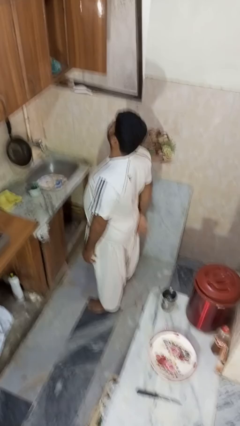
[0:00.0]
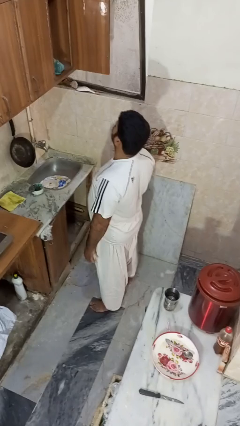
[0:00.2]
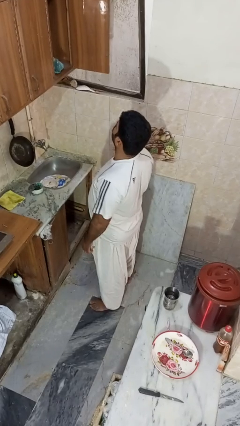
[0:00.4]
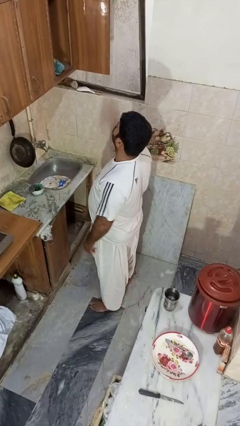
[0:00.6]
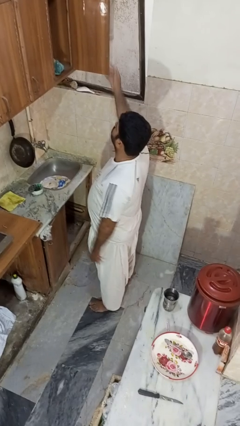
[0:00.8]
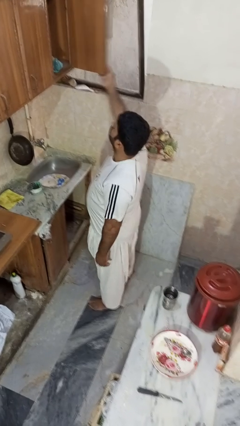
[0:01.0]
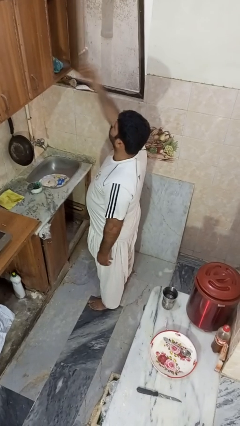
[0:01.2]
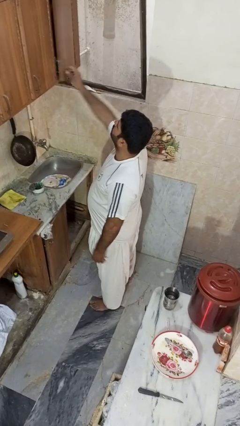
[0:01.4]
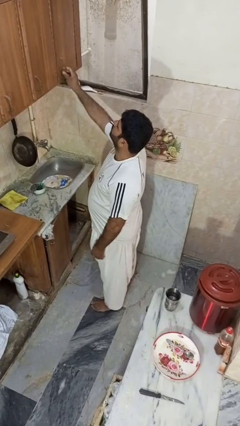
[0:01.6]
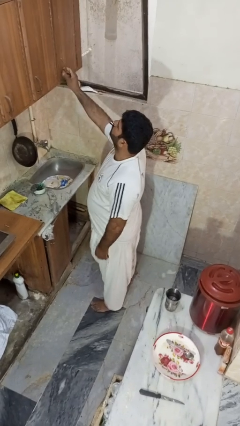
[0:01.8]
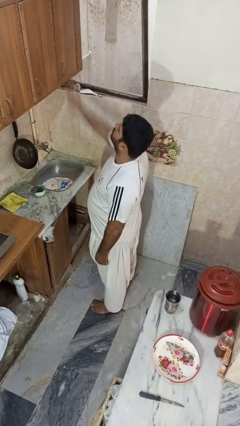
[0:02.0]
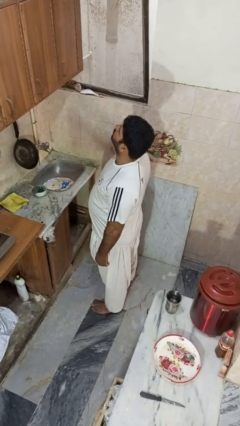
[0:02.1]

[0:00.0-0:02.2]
person closes cabinet

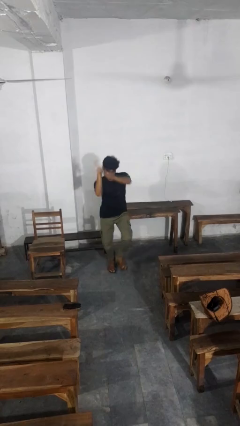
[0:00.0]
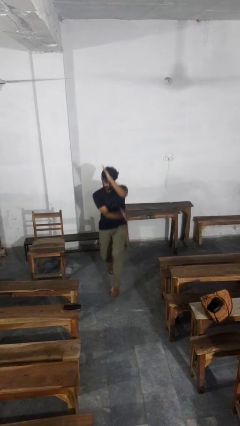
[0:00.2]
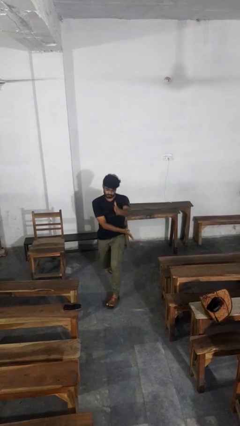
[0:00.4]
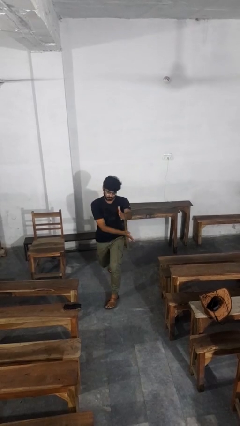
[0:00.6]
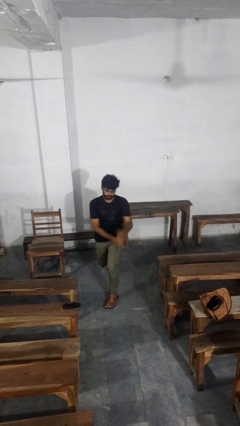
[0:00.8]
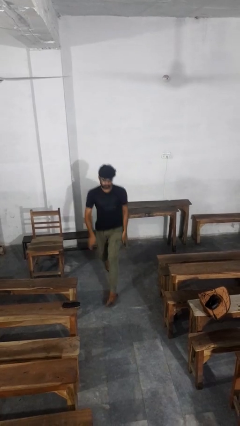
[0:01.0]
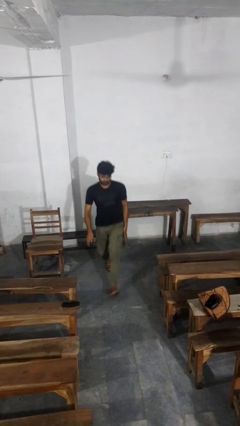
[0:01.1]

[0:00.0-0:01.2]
person karate chop

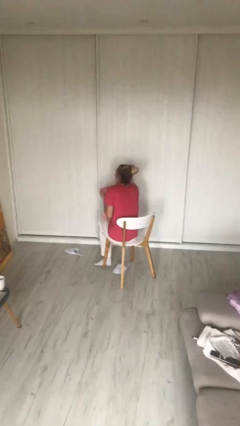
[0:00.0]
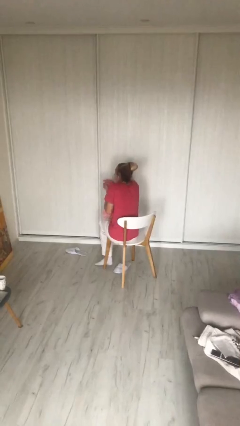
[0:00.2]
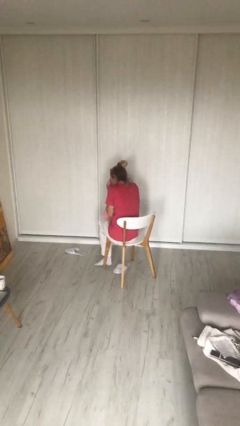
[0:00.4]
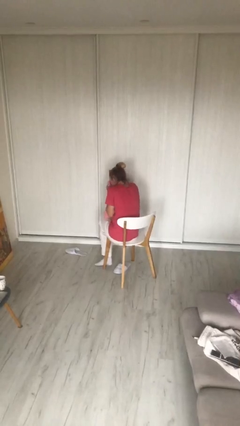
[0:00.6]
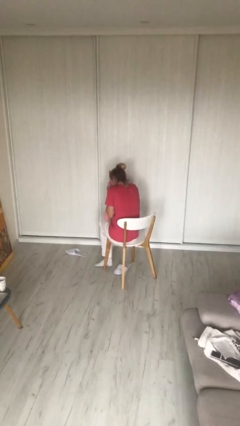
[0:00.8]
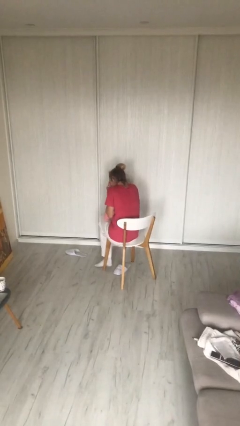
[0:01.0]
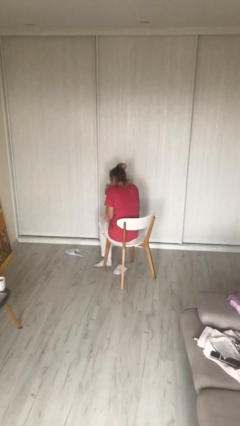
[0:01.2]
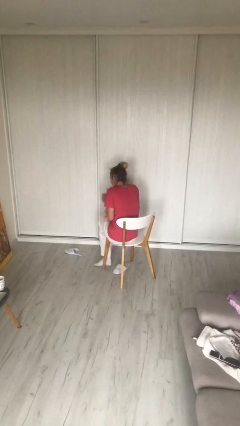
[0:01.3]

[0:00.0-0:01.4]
person blows nose

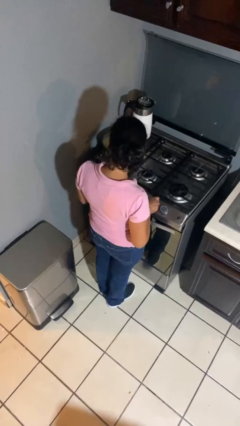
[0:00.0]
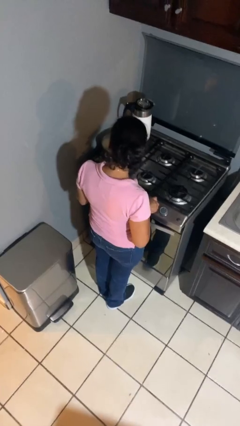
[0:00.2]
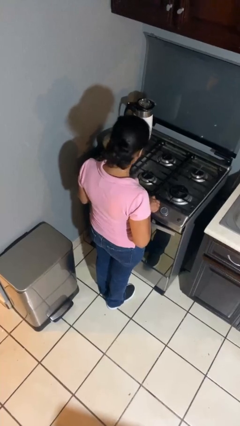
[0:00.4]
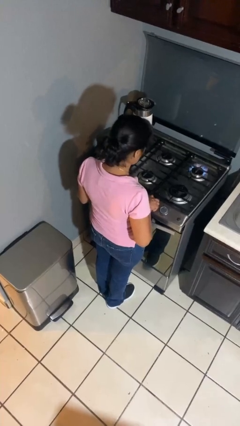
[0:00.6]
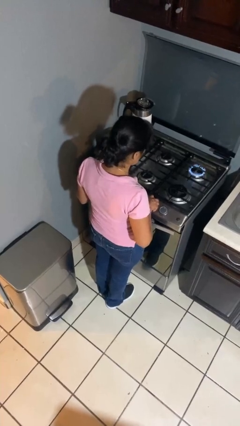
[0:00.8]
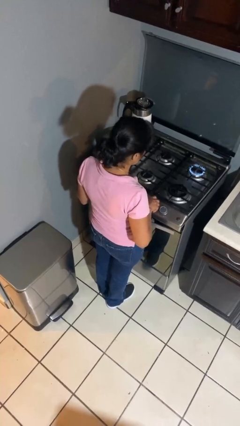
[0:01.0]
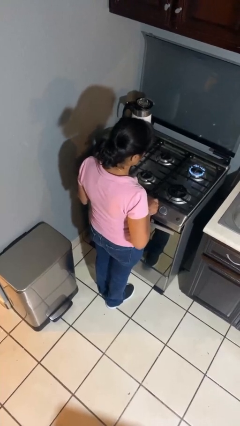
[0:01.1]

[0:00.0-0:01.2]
person turns on stovetop

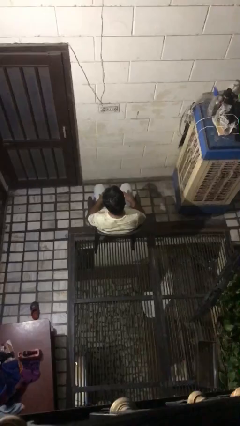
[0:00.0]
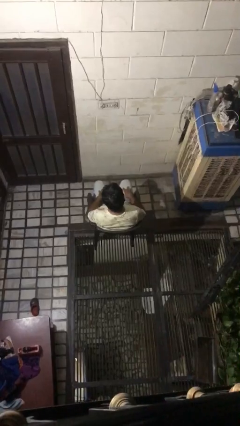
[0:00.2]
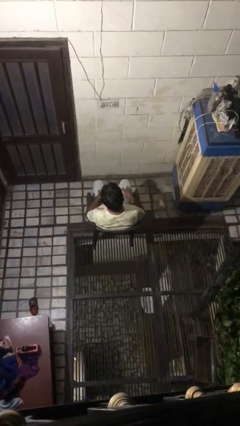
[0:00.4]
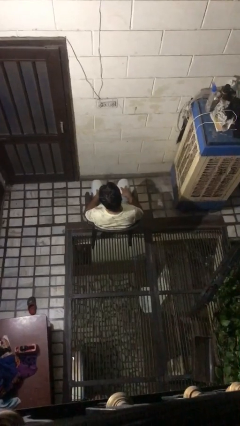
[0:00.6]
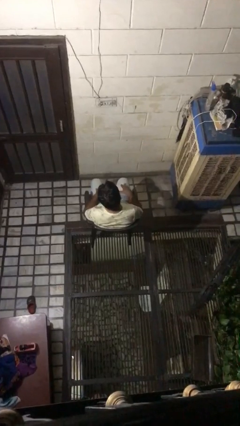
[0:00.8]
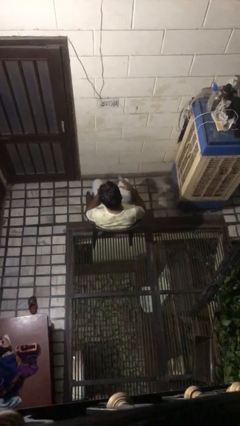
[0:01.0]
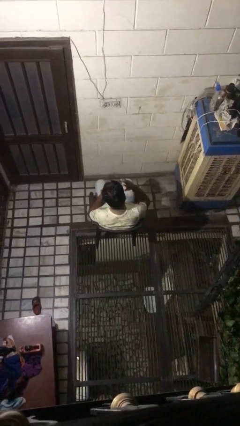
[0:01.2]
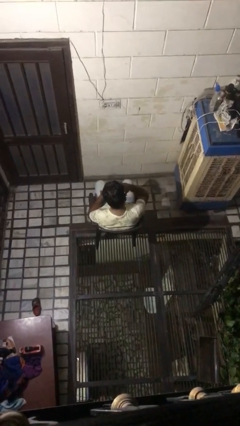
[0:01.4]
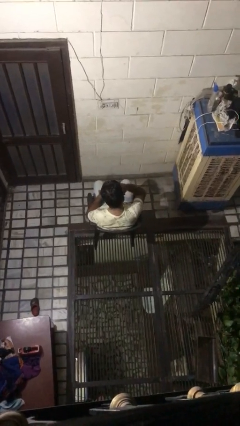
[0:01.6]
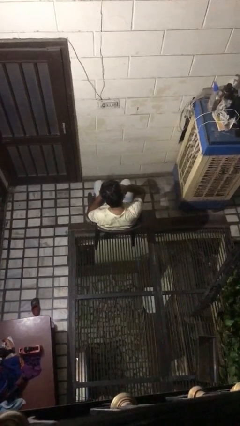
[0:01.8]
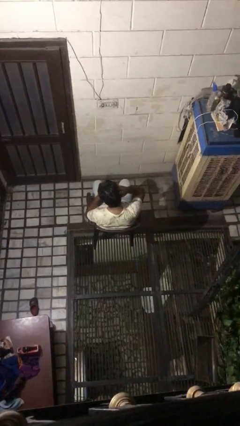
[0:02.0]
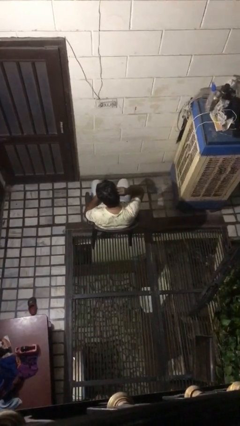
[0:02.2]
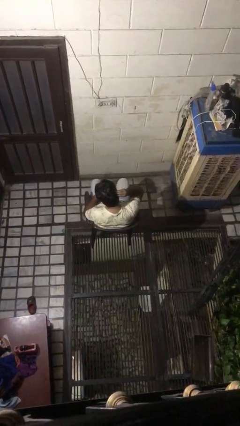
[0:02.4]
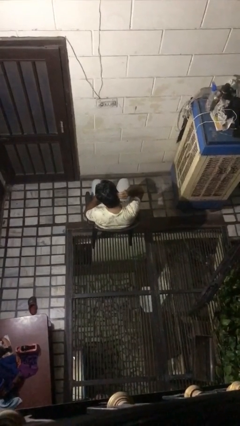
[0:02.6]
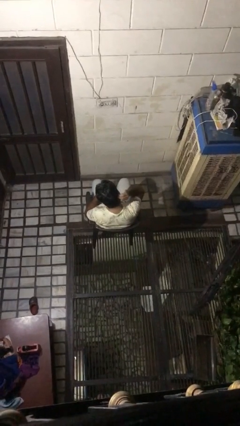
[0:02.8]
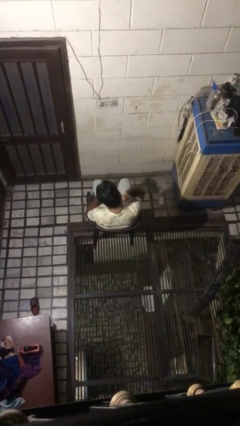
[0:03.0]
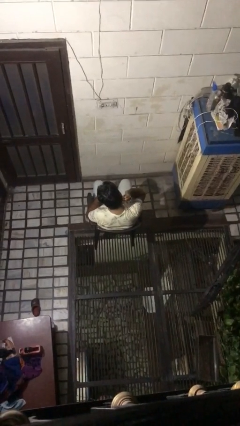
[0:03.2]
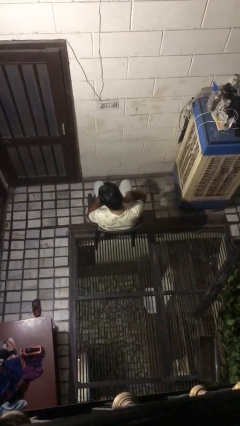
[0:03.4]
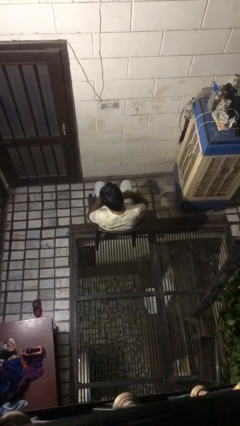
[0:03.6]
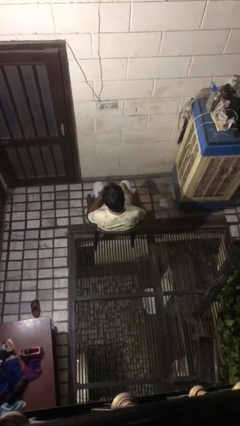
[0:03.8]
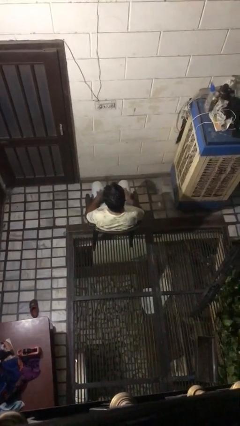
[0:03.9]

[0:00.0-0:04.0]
person strokes hair

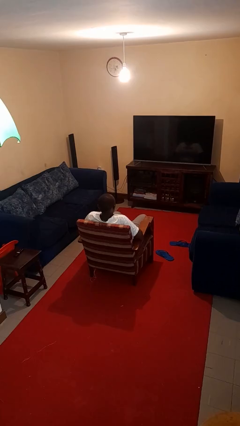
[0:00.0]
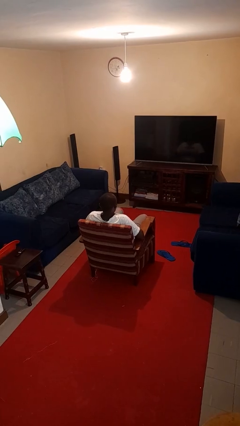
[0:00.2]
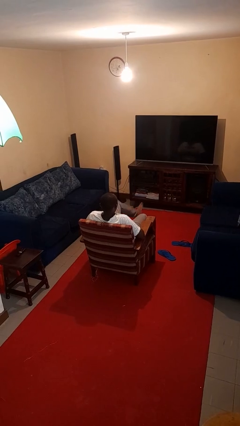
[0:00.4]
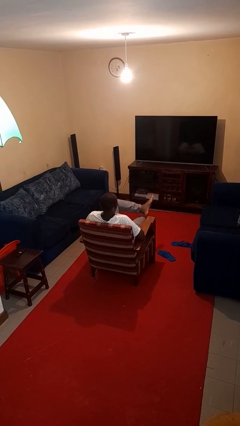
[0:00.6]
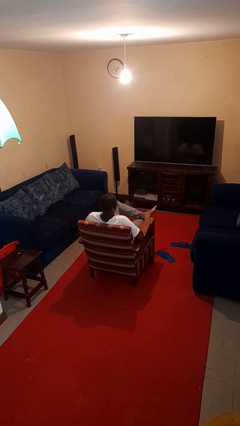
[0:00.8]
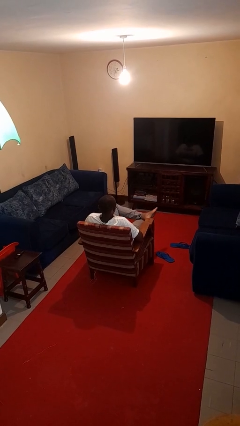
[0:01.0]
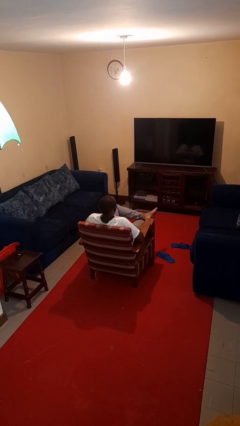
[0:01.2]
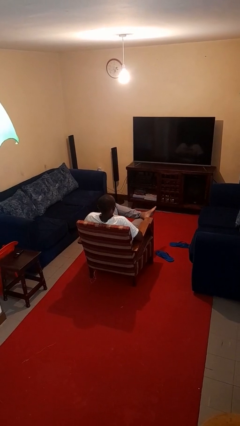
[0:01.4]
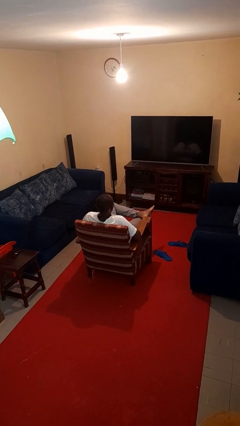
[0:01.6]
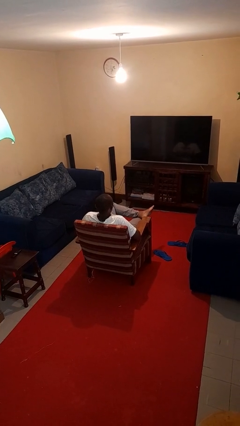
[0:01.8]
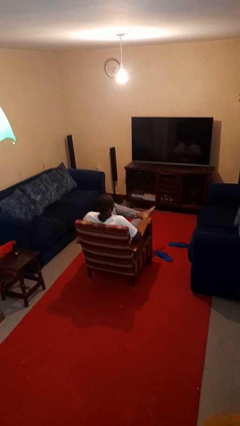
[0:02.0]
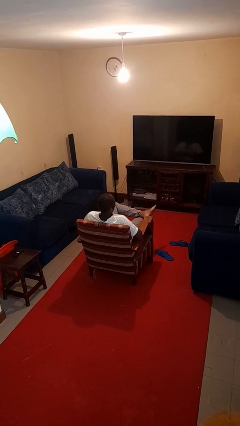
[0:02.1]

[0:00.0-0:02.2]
person crosses legs

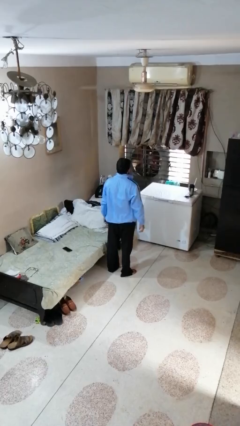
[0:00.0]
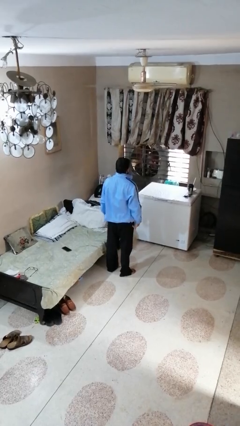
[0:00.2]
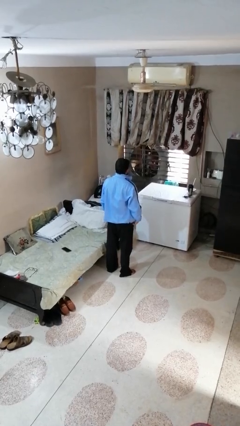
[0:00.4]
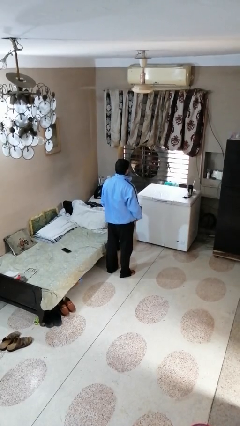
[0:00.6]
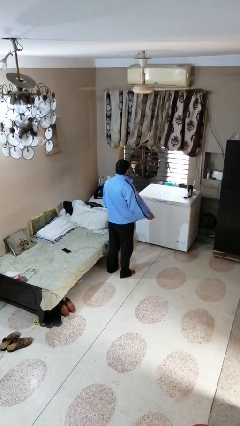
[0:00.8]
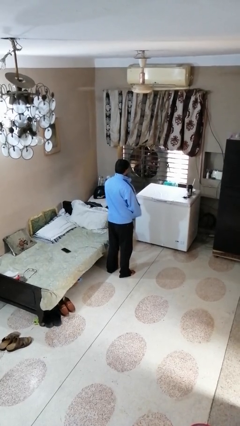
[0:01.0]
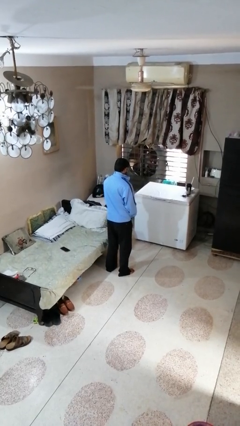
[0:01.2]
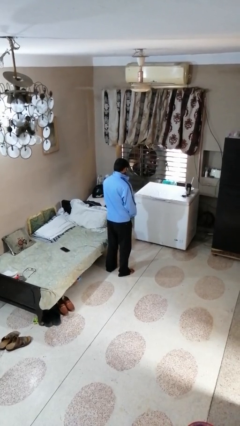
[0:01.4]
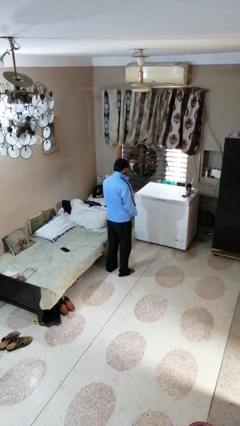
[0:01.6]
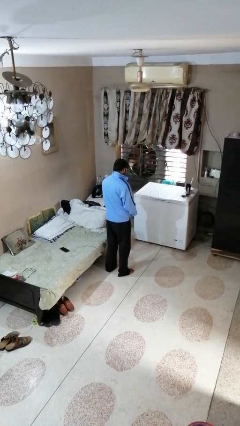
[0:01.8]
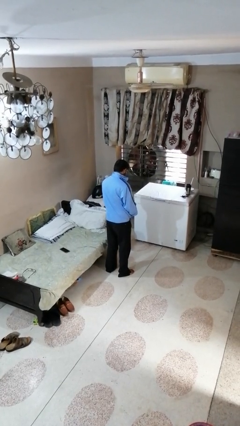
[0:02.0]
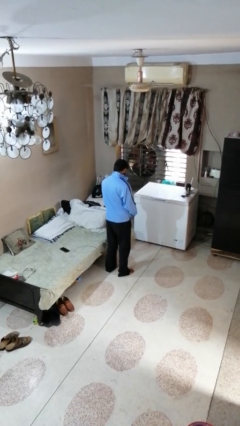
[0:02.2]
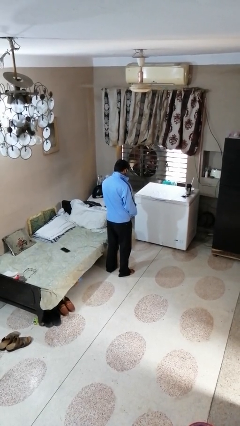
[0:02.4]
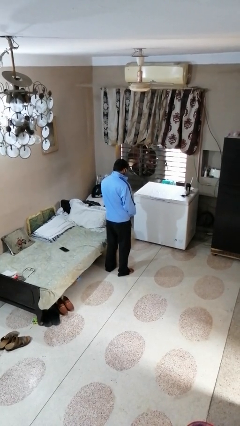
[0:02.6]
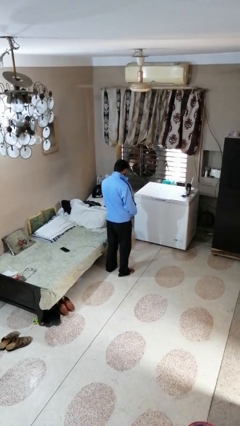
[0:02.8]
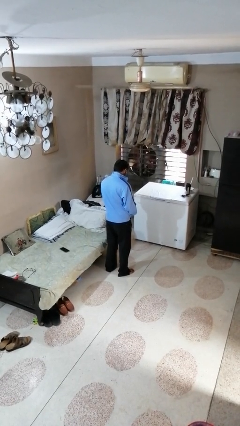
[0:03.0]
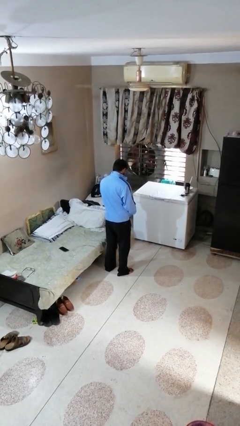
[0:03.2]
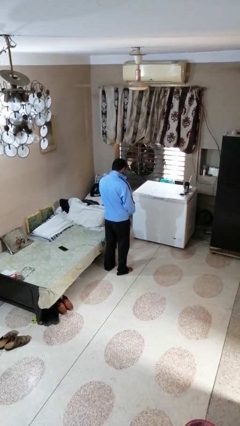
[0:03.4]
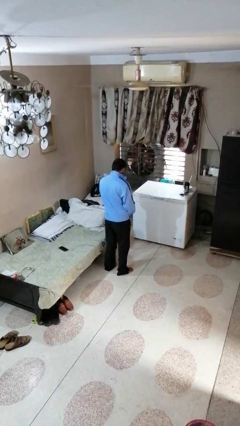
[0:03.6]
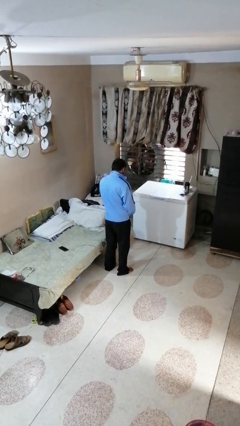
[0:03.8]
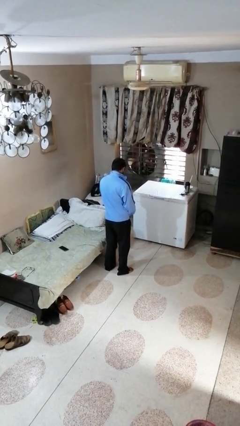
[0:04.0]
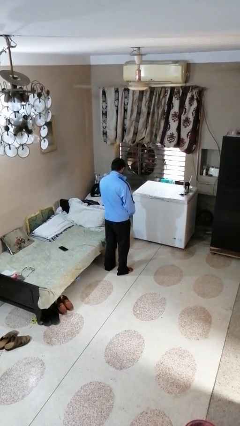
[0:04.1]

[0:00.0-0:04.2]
person zips up jacket

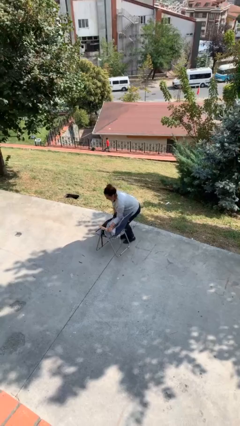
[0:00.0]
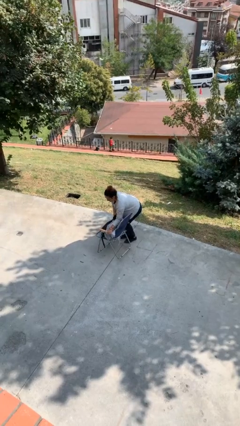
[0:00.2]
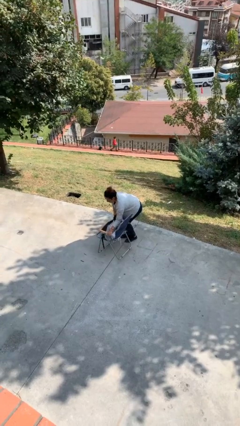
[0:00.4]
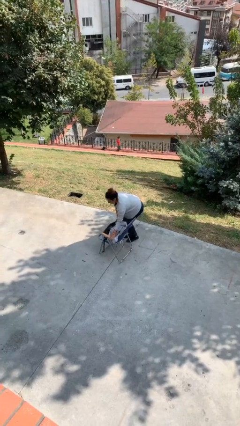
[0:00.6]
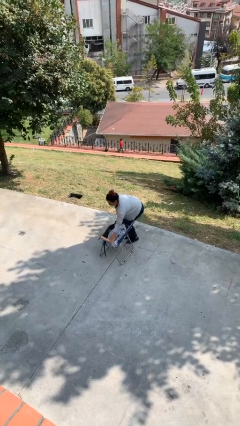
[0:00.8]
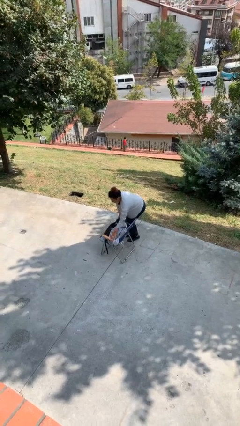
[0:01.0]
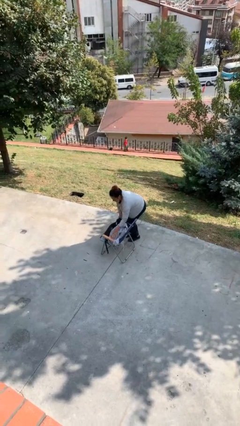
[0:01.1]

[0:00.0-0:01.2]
person puts down object on floor
